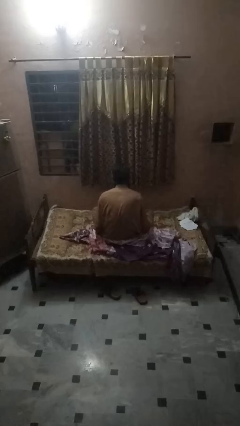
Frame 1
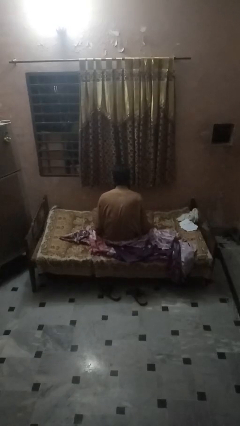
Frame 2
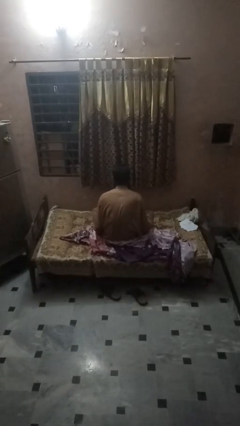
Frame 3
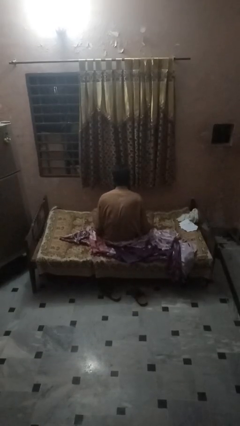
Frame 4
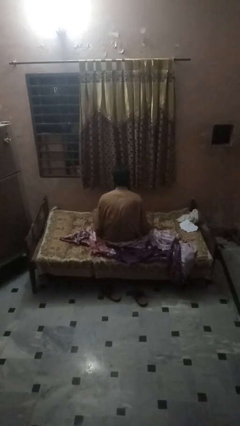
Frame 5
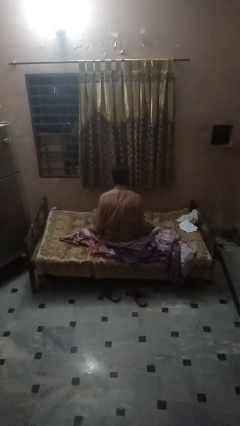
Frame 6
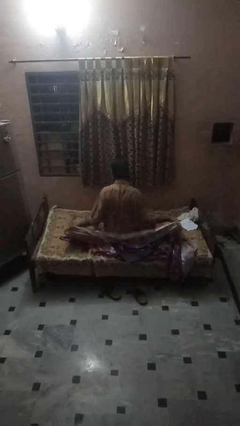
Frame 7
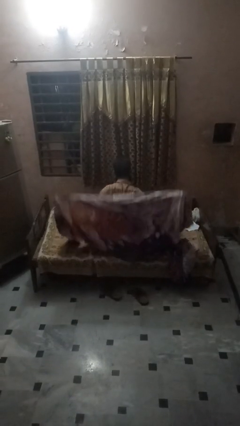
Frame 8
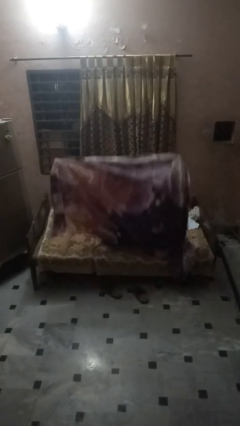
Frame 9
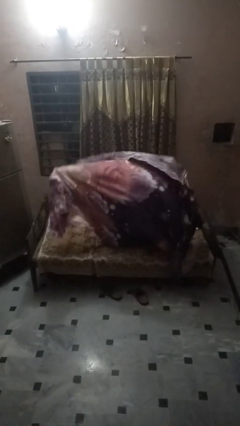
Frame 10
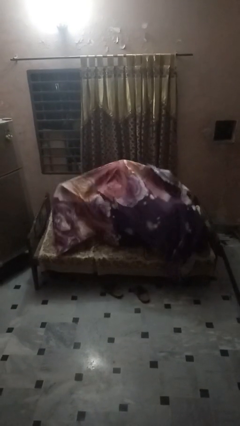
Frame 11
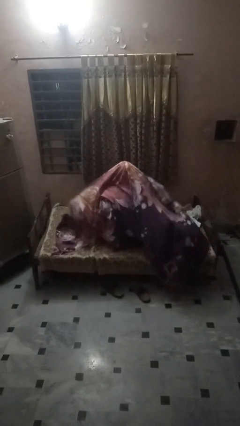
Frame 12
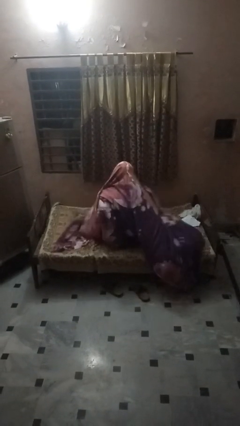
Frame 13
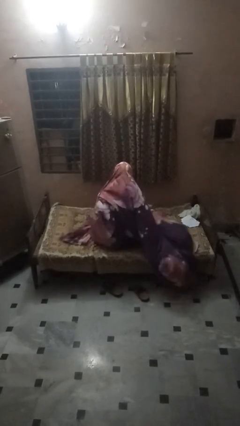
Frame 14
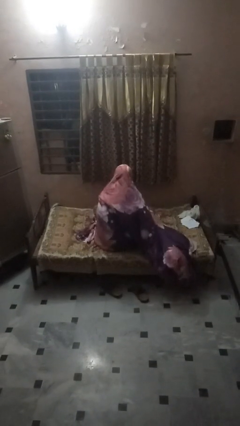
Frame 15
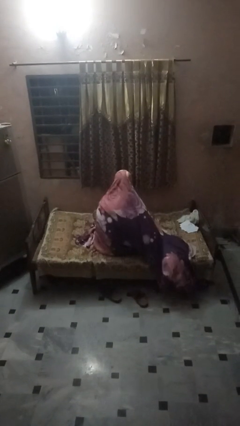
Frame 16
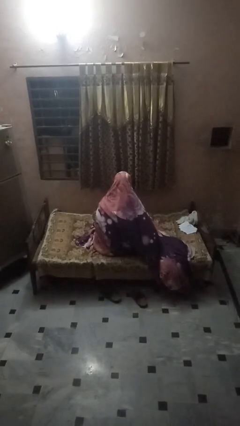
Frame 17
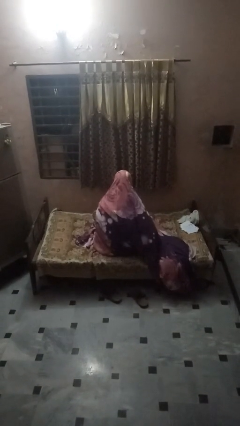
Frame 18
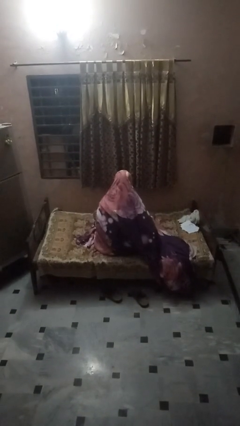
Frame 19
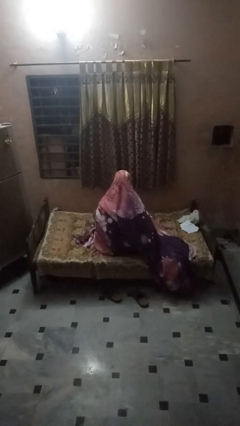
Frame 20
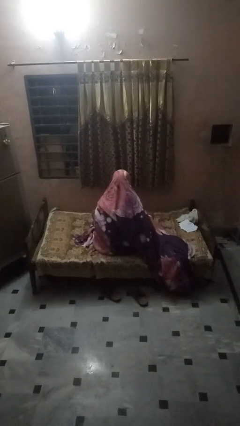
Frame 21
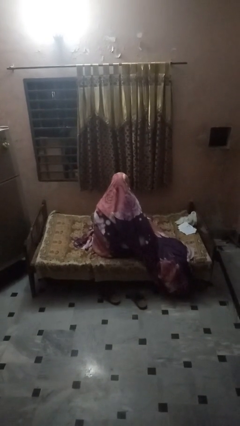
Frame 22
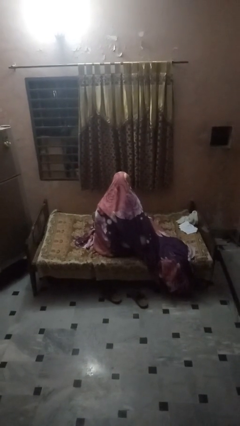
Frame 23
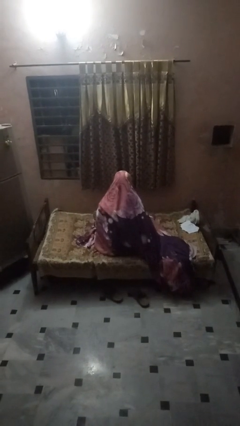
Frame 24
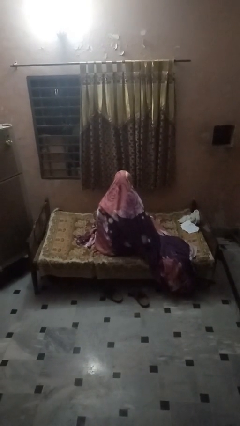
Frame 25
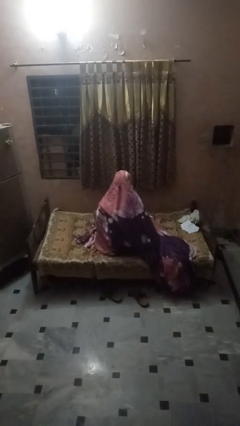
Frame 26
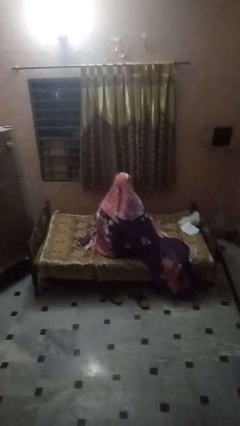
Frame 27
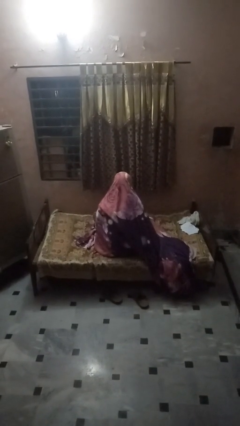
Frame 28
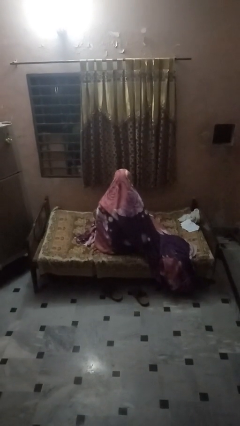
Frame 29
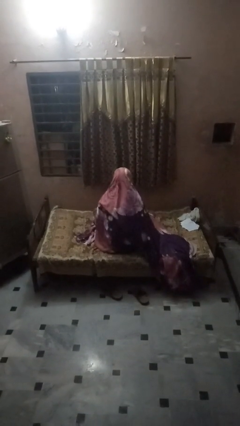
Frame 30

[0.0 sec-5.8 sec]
person covers with bedsheets

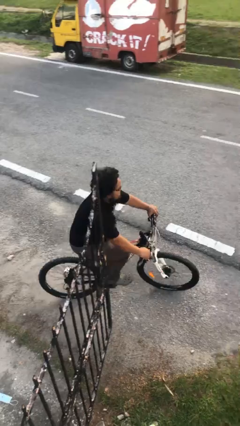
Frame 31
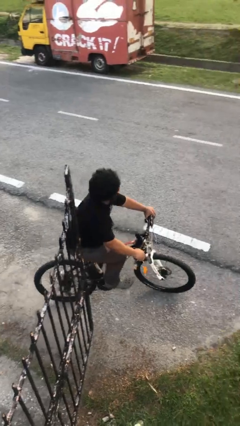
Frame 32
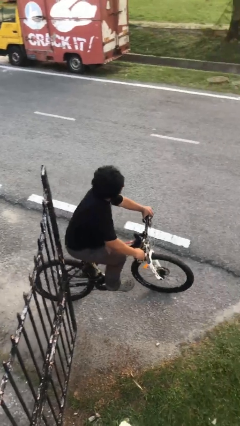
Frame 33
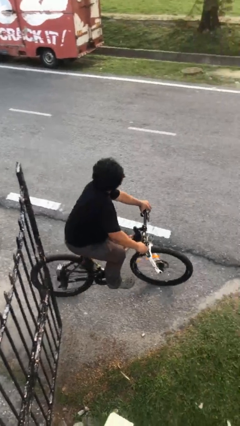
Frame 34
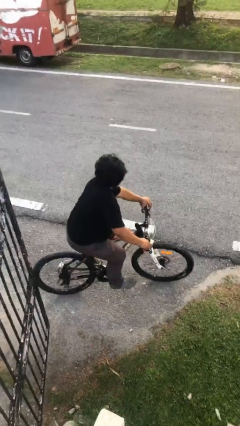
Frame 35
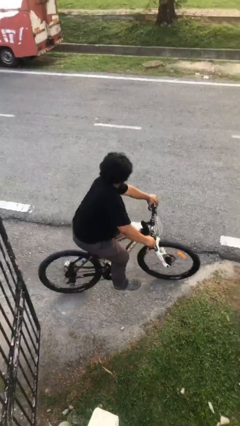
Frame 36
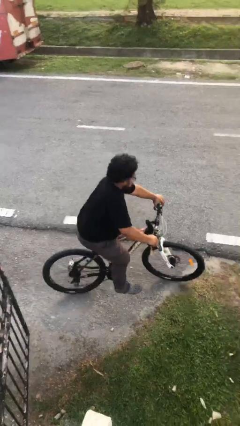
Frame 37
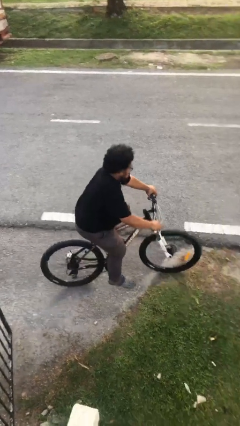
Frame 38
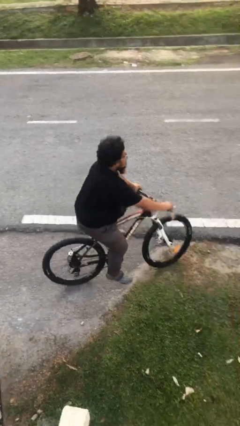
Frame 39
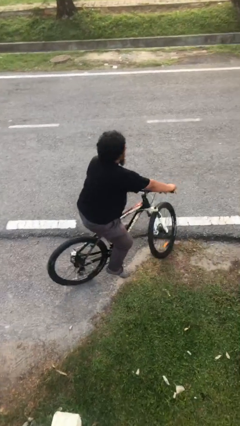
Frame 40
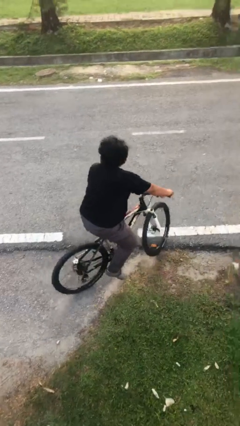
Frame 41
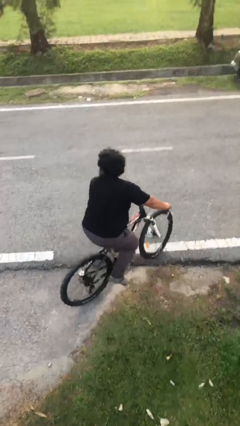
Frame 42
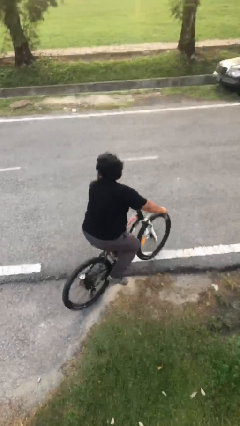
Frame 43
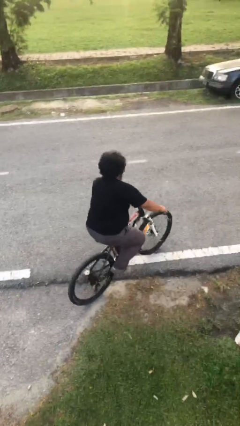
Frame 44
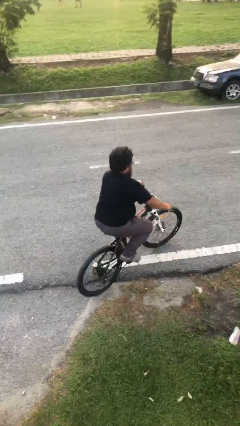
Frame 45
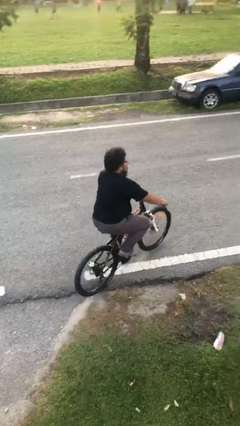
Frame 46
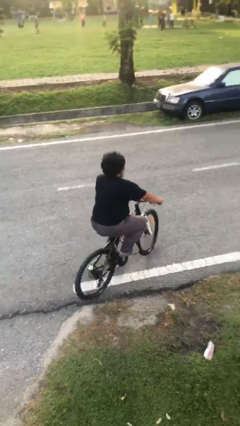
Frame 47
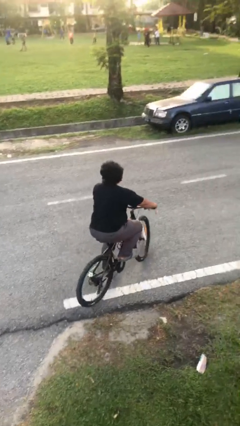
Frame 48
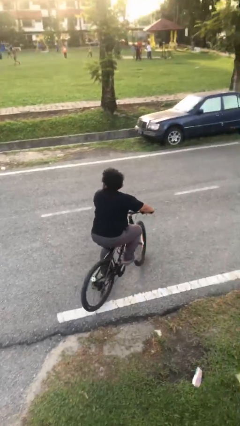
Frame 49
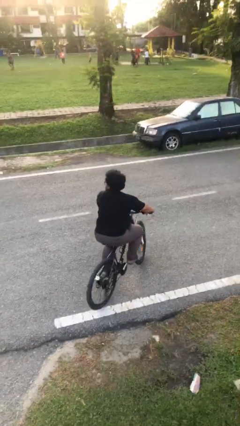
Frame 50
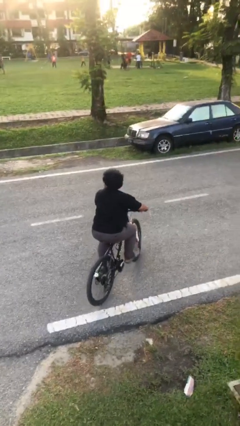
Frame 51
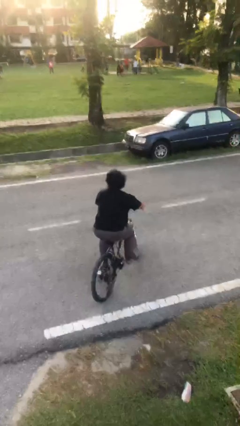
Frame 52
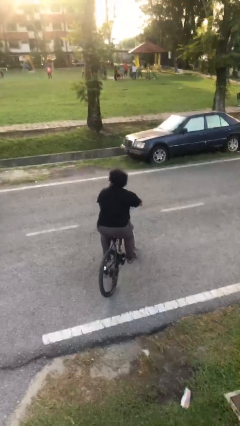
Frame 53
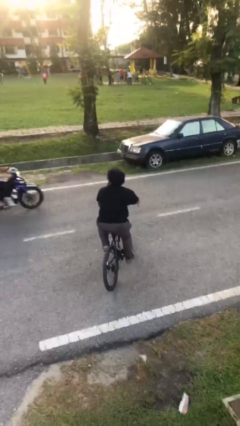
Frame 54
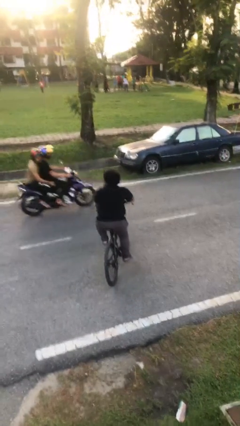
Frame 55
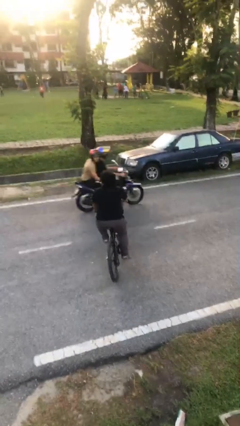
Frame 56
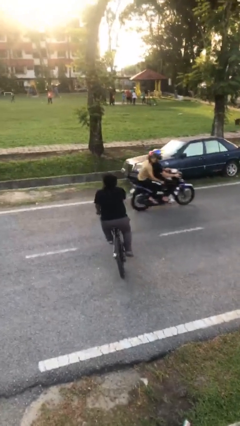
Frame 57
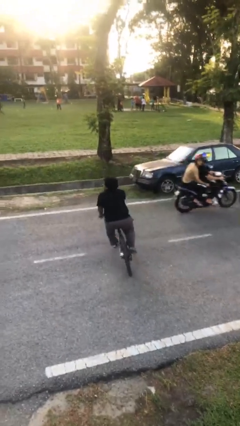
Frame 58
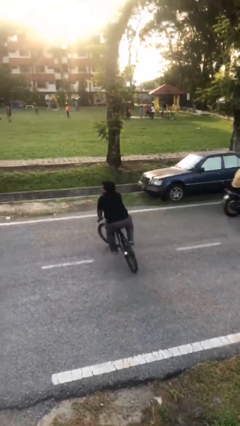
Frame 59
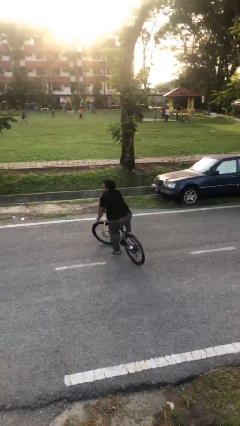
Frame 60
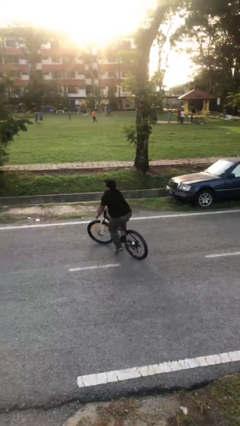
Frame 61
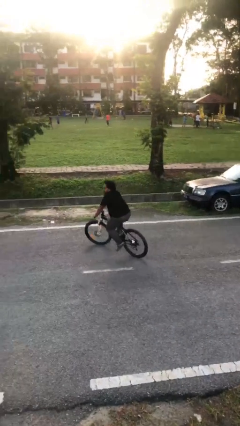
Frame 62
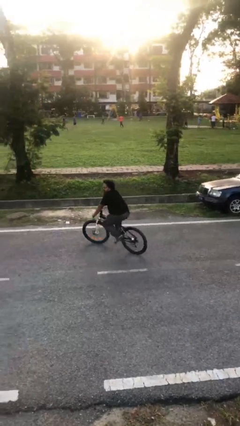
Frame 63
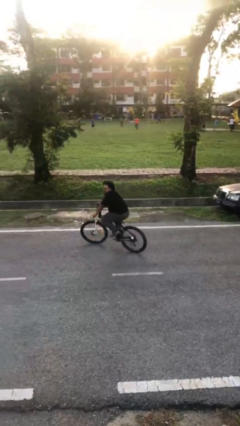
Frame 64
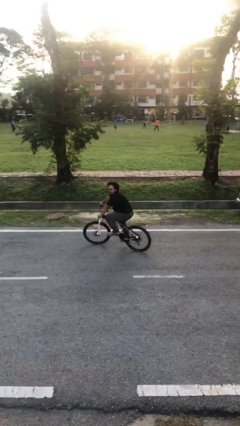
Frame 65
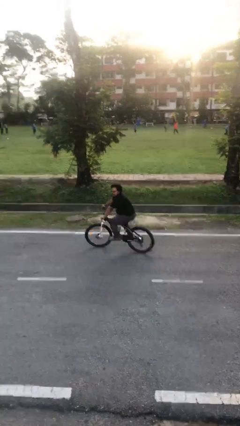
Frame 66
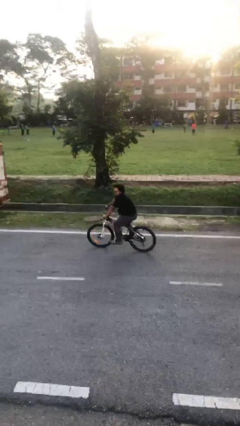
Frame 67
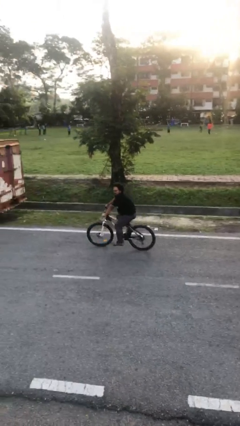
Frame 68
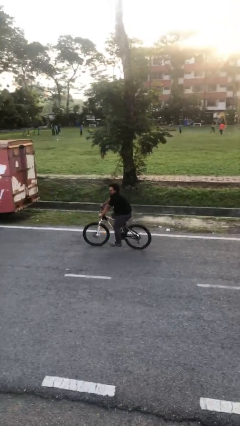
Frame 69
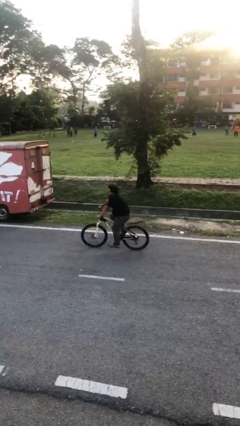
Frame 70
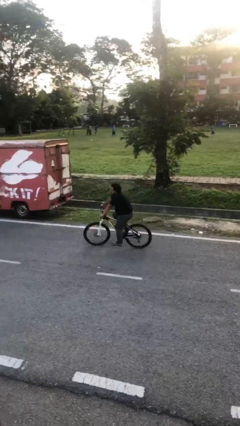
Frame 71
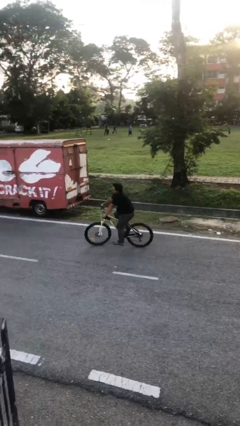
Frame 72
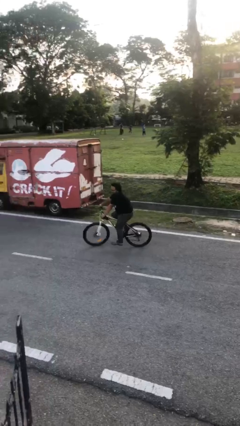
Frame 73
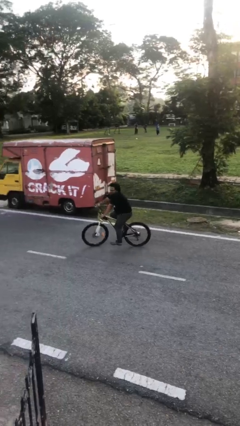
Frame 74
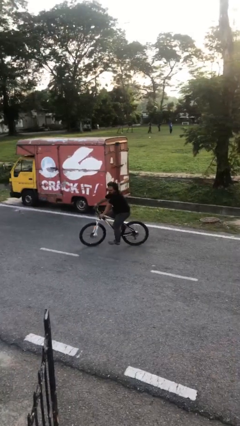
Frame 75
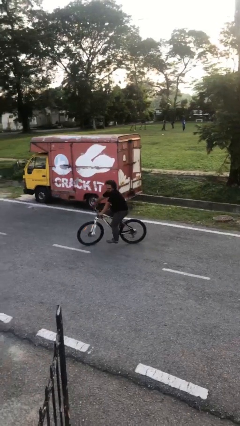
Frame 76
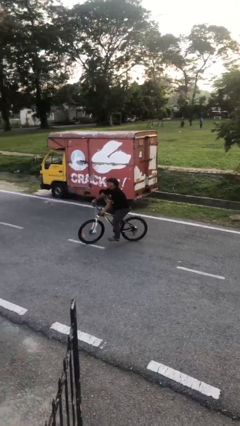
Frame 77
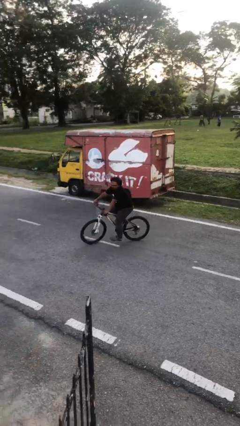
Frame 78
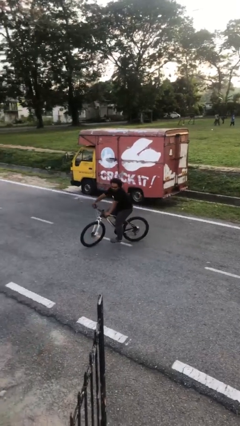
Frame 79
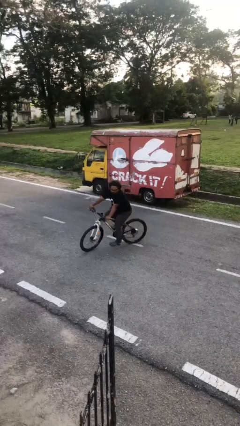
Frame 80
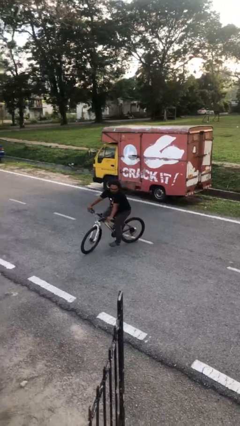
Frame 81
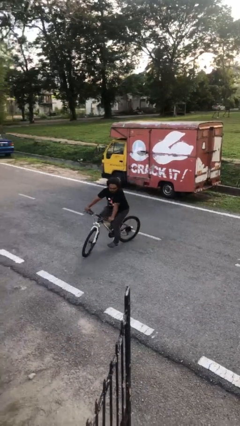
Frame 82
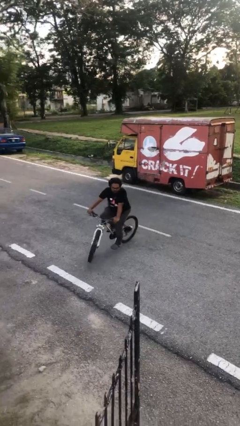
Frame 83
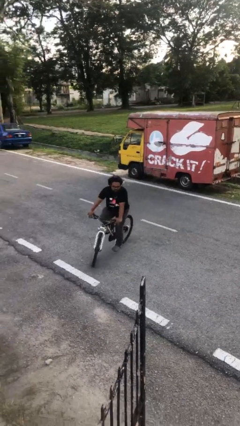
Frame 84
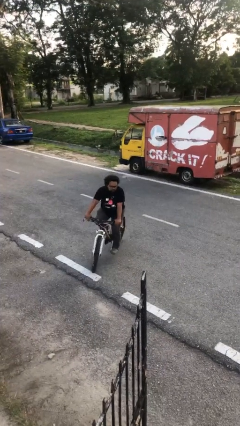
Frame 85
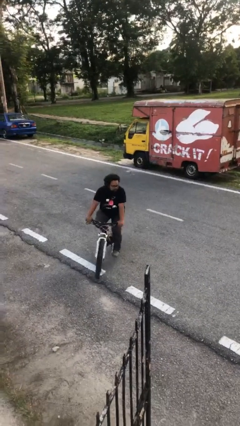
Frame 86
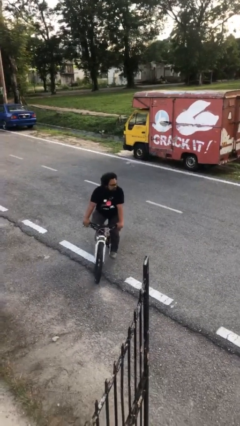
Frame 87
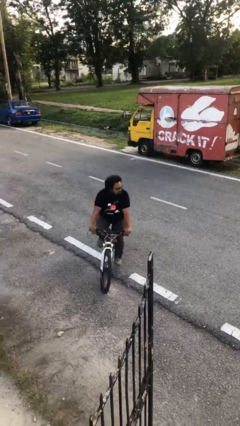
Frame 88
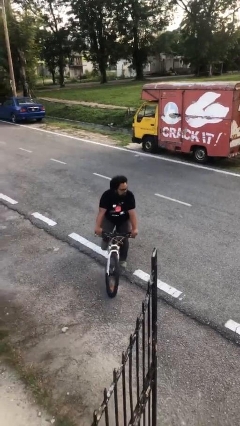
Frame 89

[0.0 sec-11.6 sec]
person rides bicycle

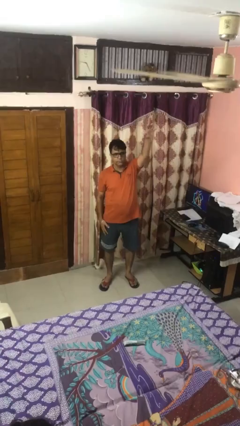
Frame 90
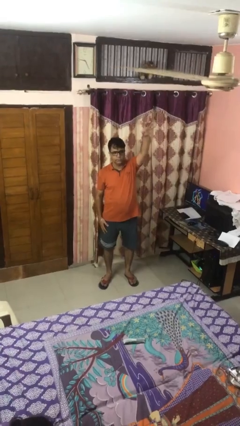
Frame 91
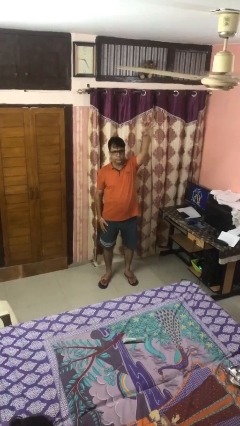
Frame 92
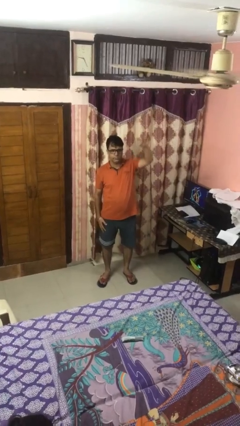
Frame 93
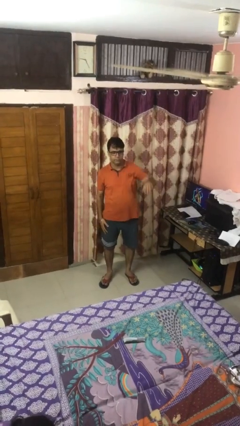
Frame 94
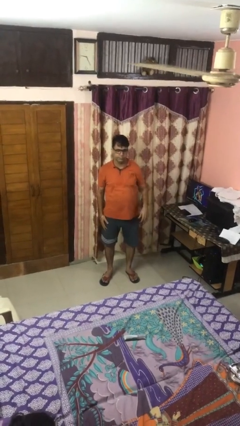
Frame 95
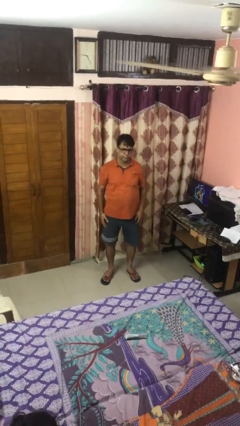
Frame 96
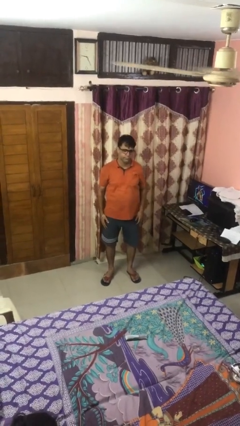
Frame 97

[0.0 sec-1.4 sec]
person gestures lower hand
